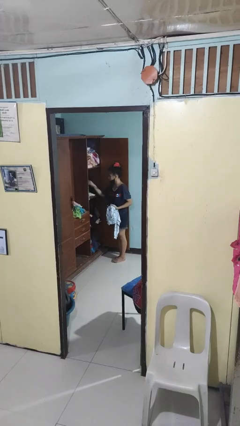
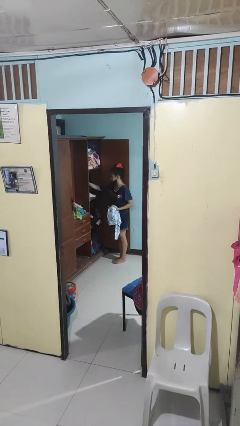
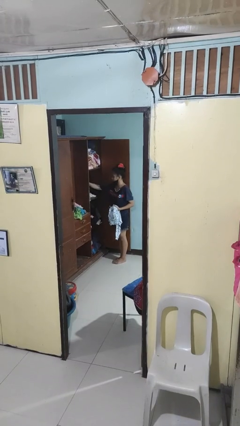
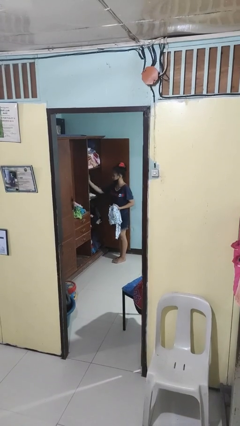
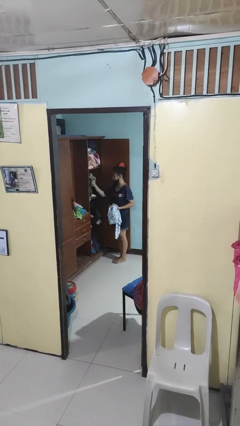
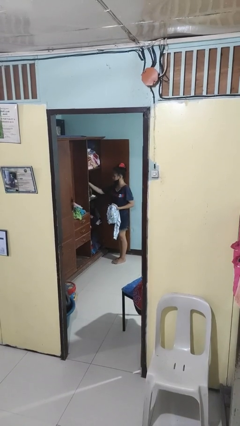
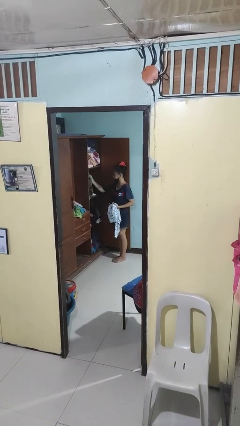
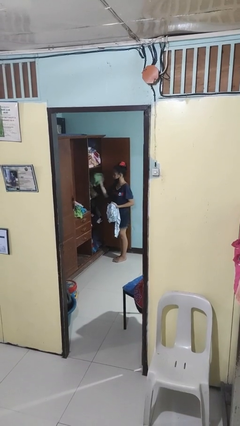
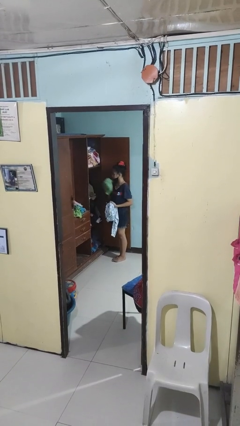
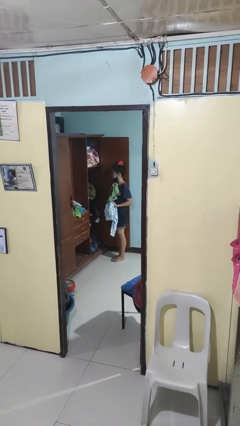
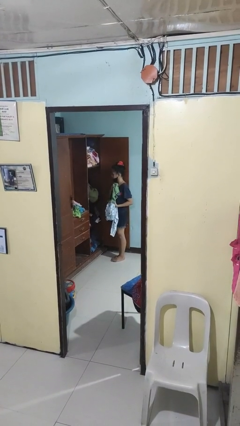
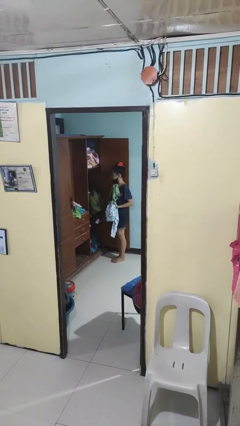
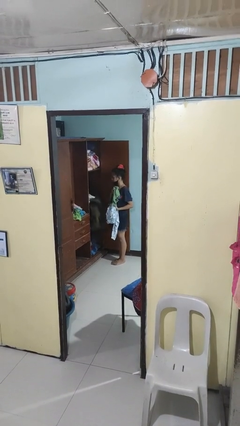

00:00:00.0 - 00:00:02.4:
person takes clothes from dresser

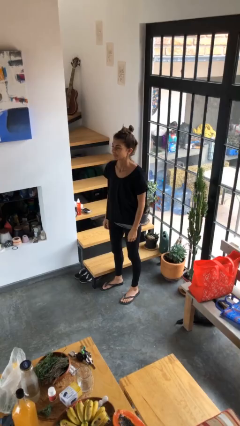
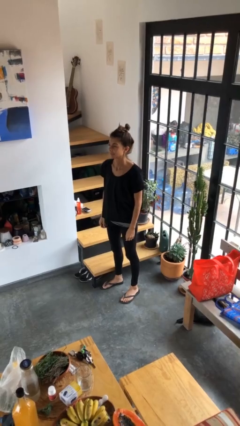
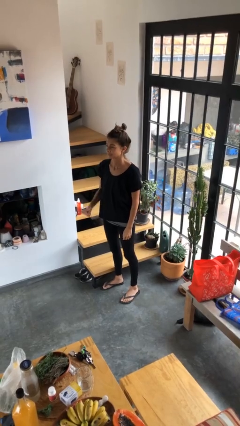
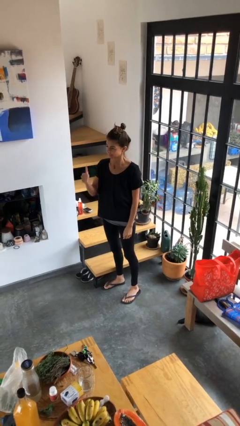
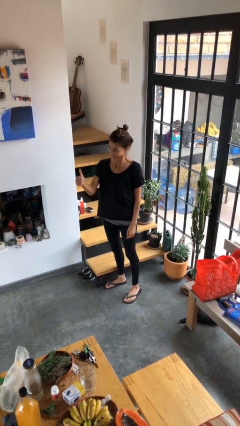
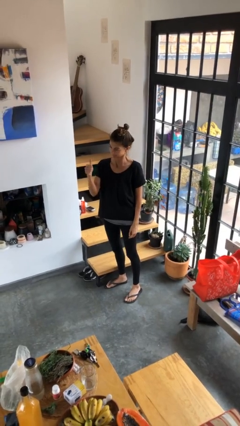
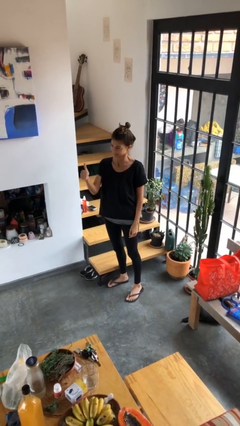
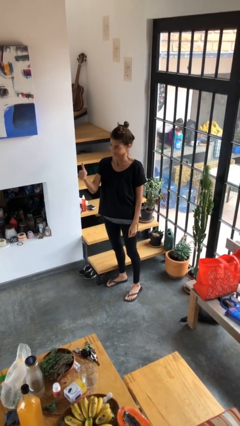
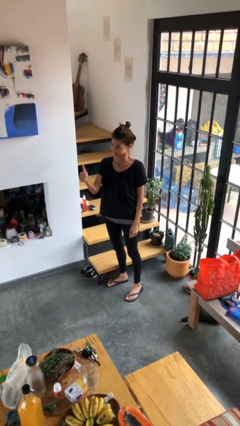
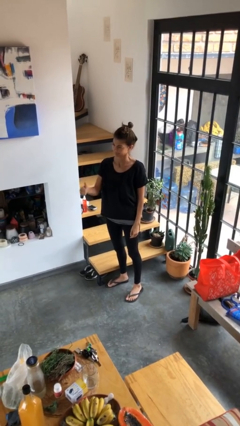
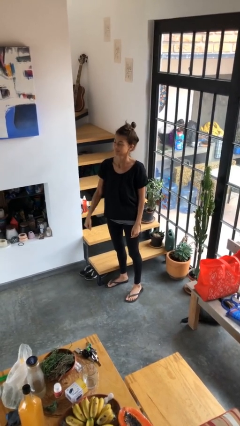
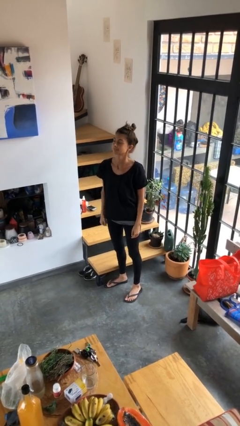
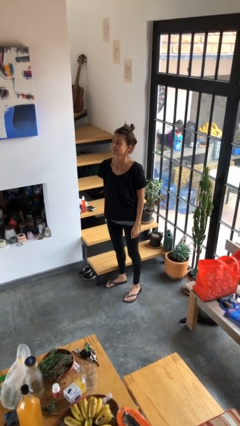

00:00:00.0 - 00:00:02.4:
person gestures thumbs up

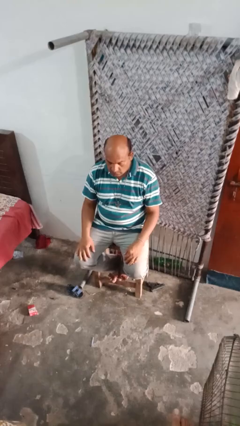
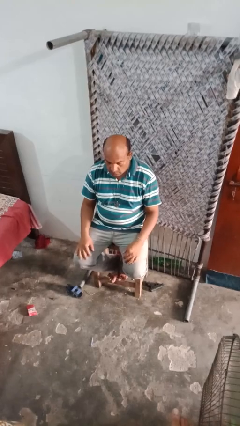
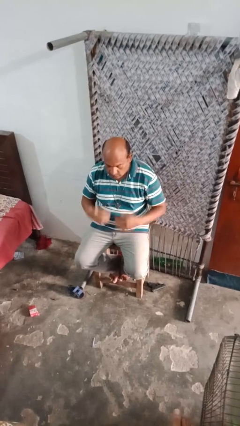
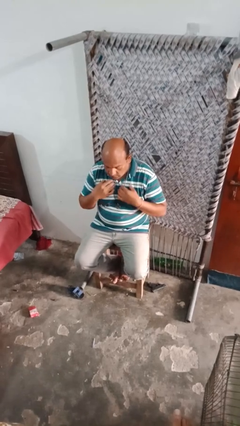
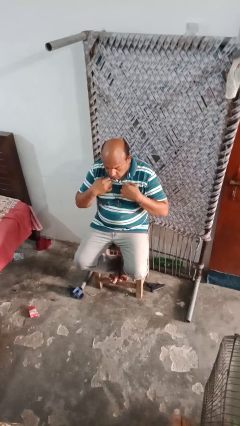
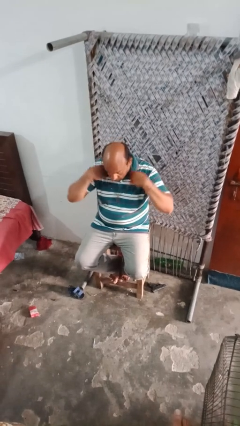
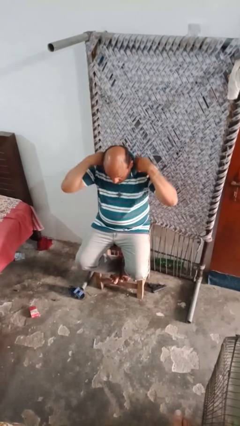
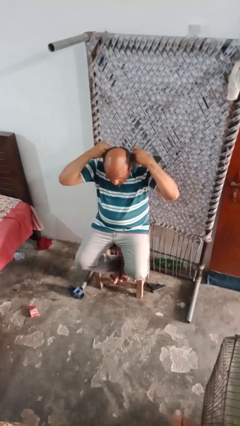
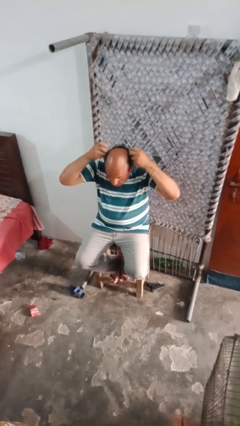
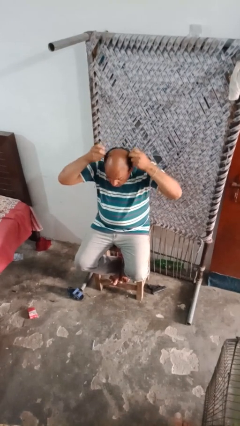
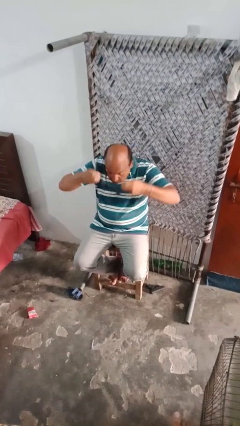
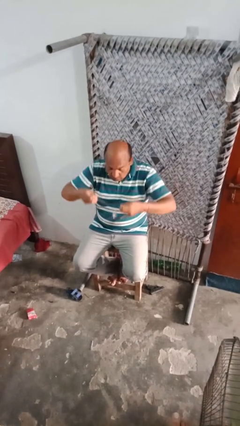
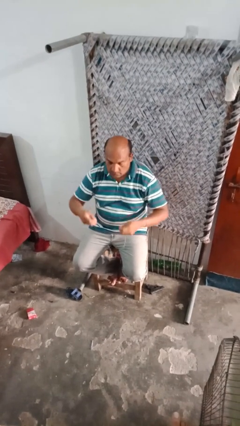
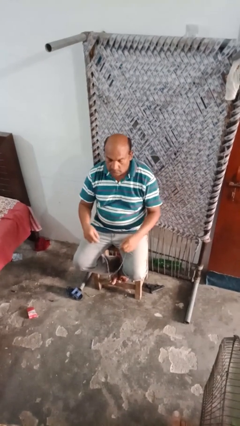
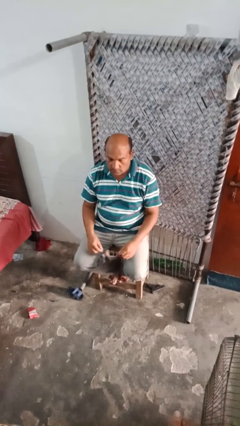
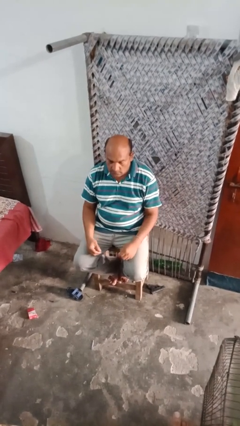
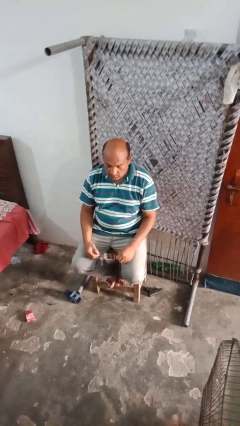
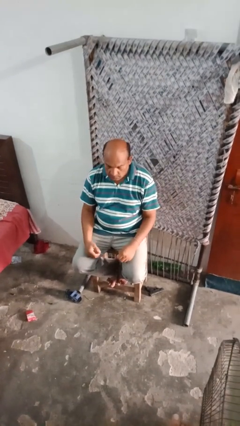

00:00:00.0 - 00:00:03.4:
person takes off necklace

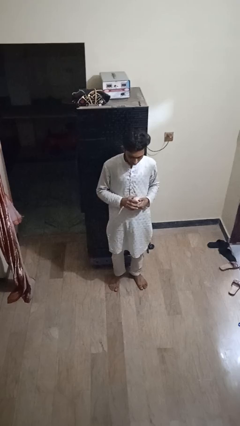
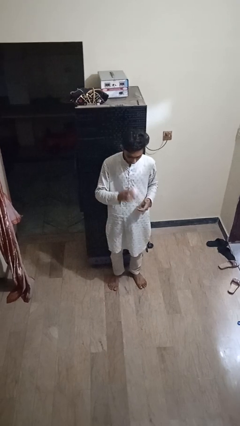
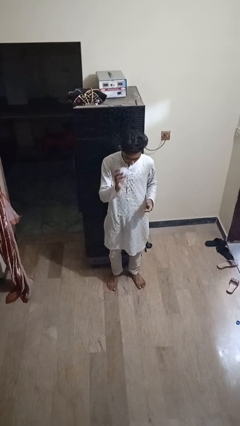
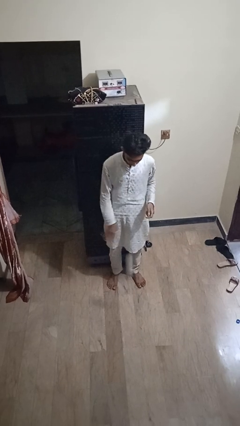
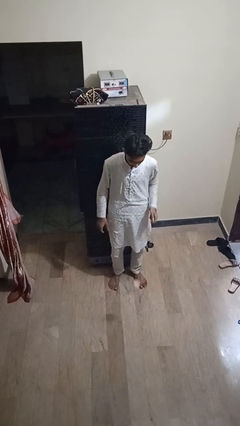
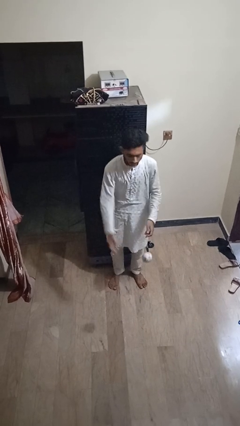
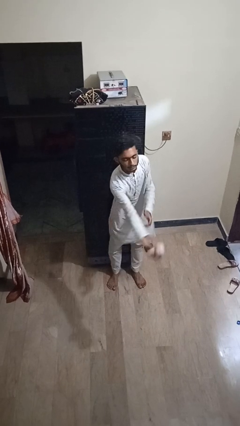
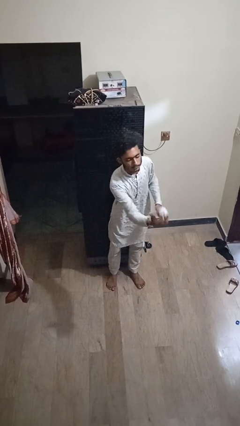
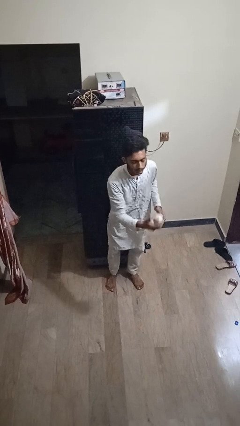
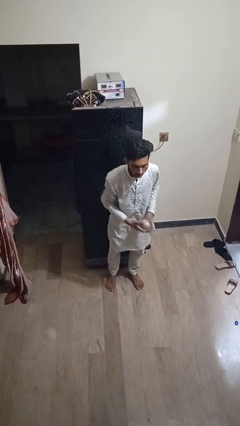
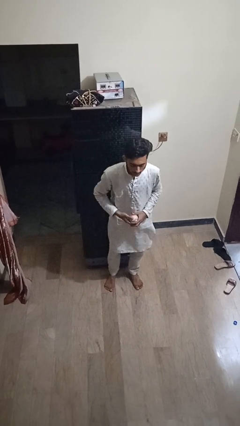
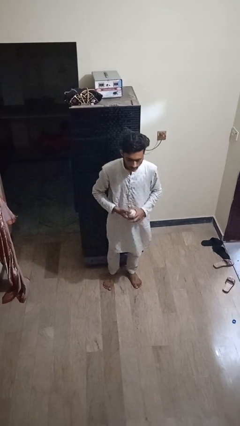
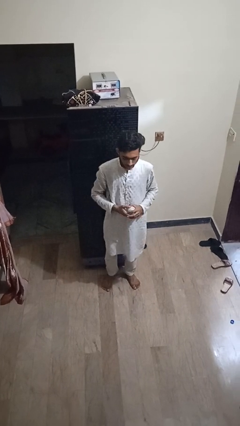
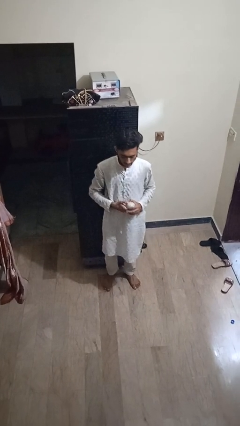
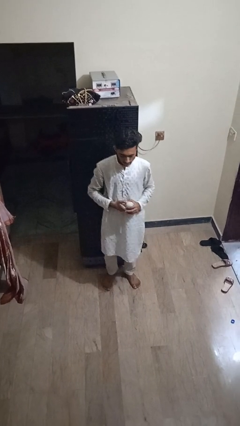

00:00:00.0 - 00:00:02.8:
person bounces ball on floor

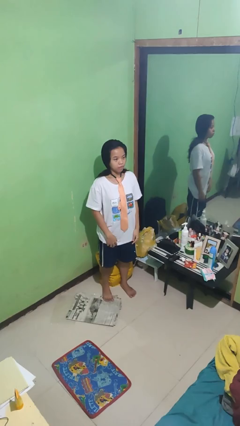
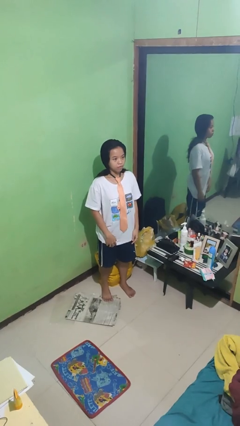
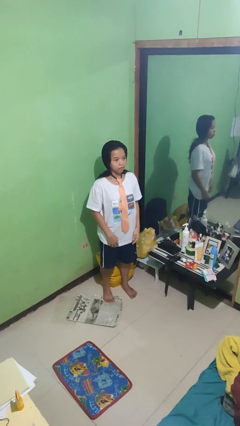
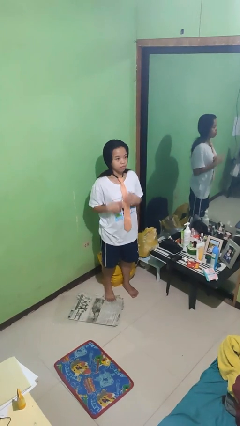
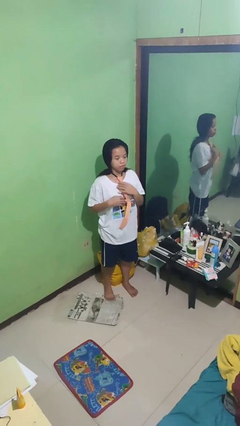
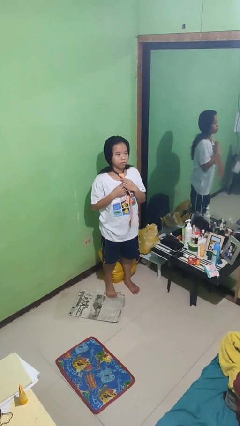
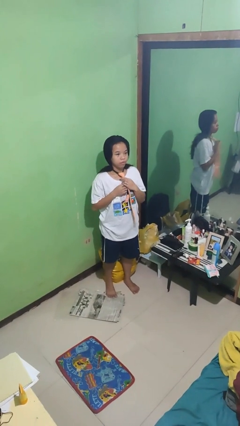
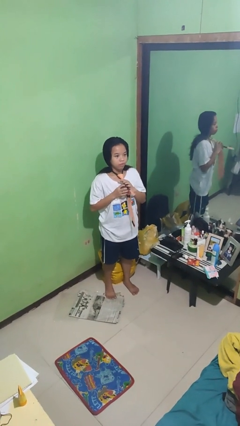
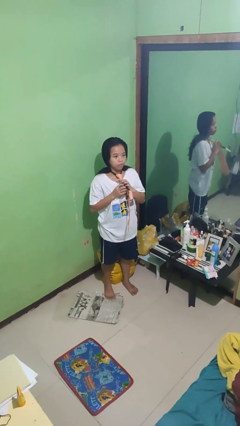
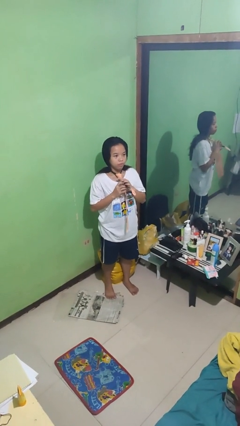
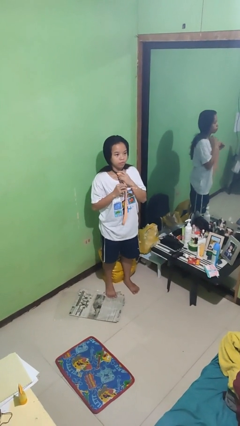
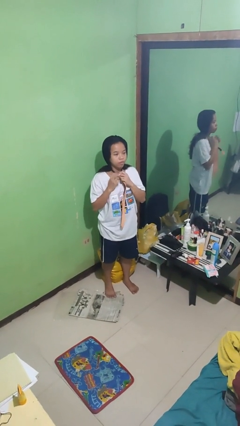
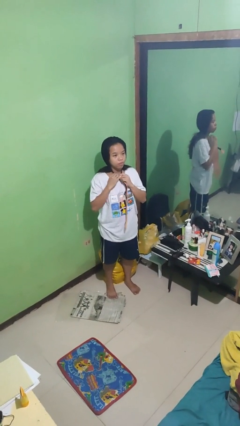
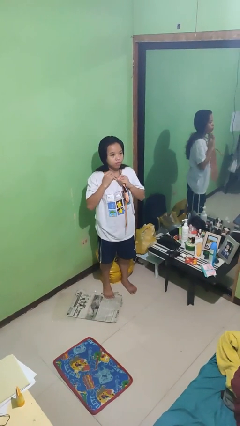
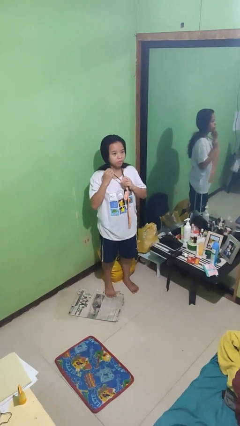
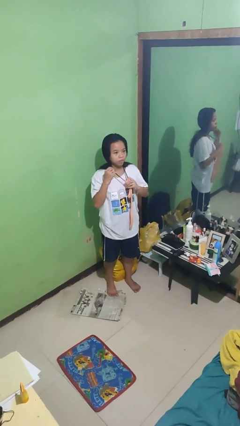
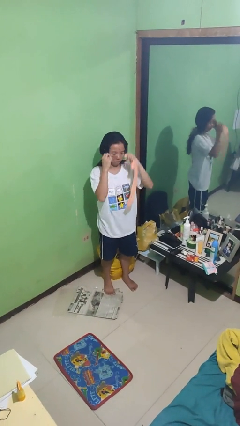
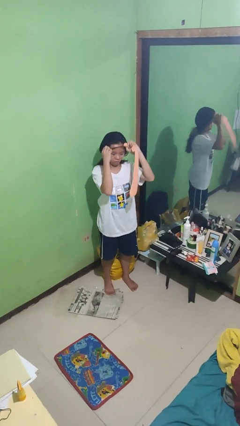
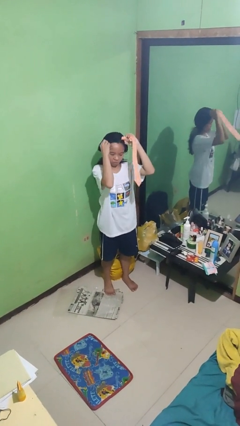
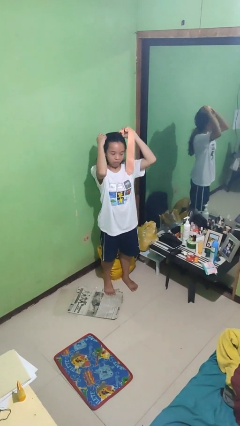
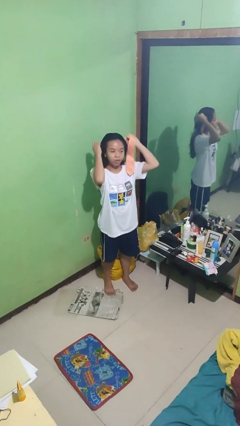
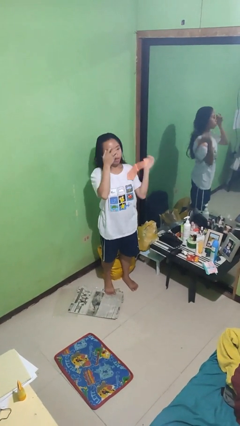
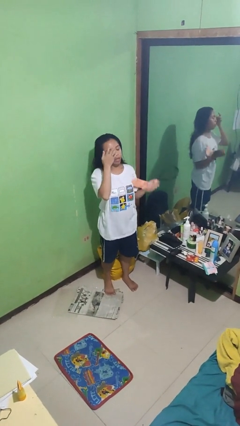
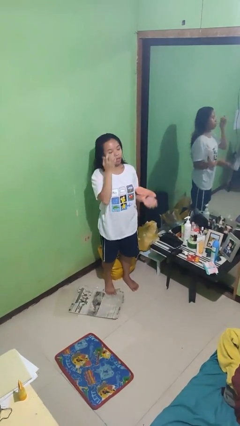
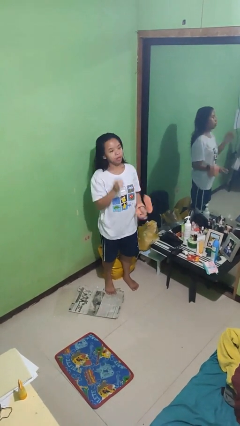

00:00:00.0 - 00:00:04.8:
person takes off necktie

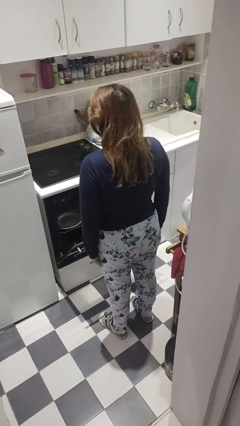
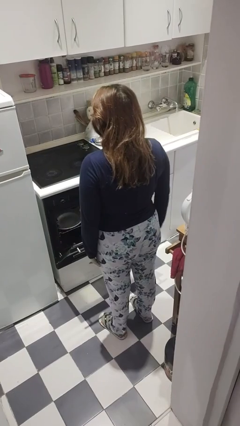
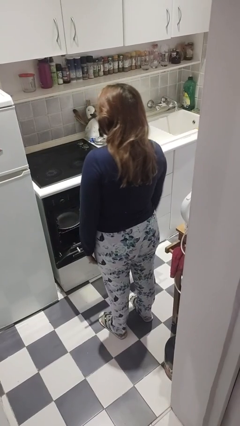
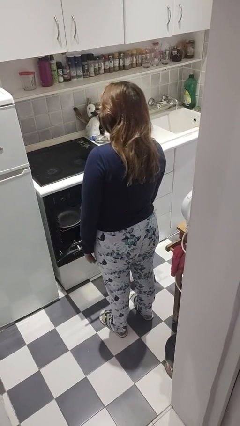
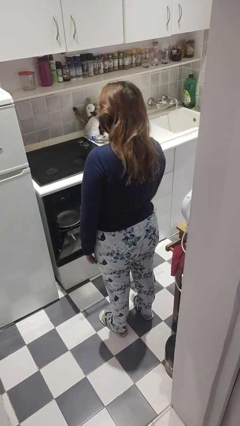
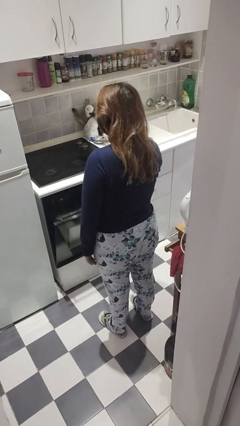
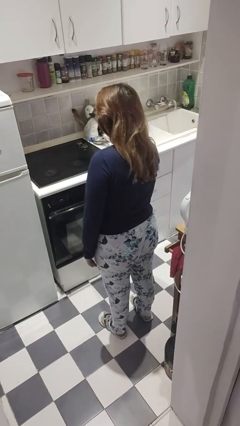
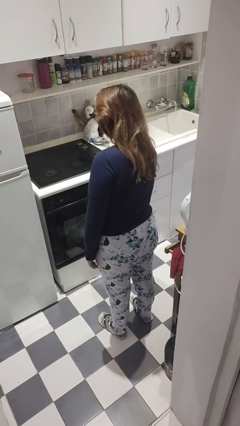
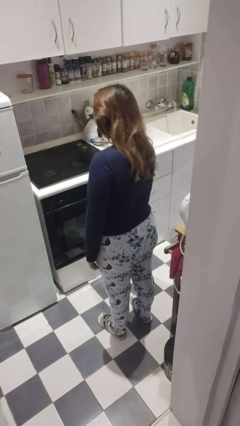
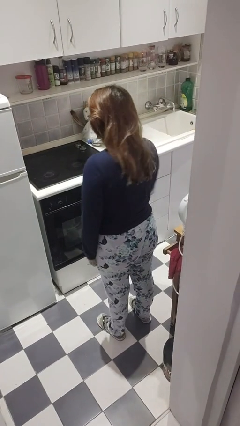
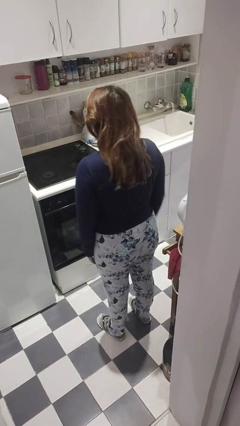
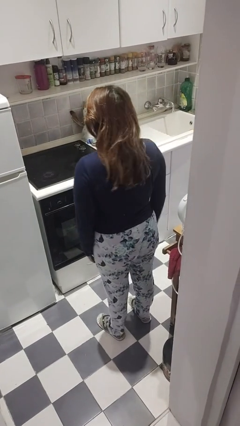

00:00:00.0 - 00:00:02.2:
person closes dishwasher
